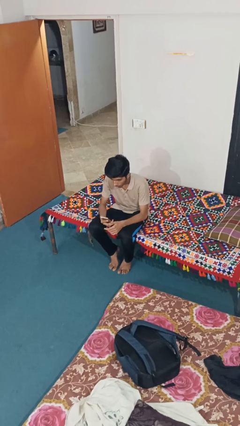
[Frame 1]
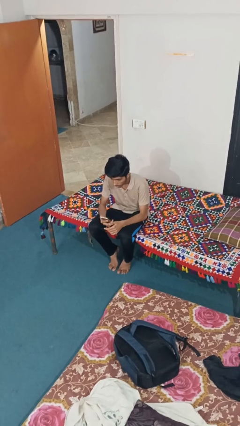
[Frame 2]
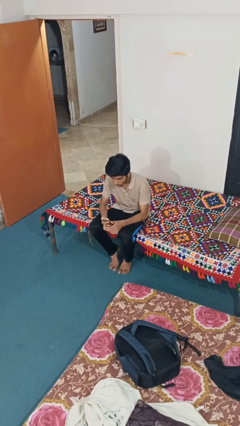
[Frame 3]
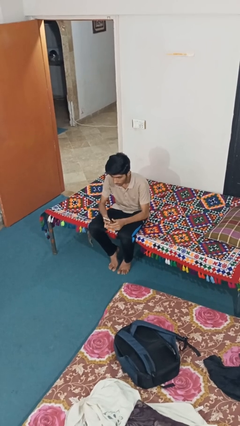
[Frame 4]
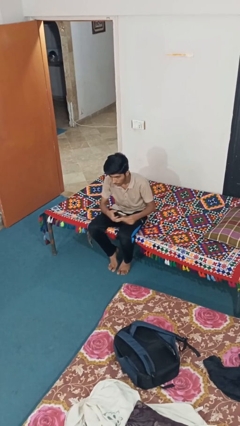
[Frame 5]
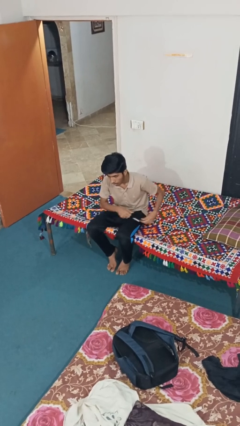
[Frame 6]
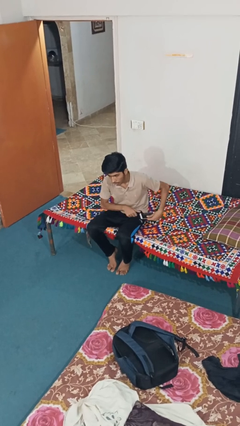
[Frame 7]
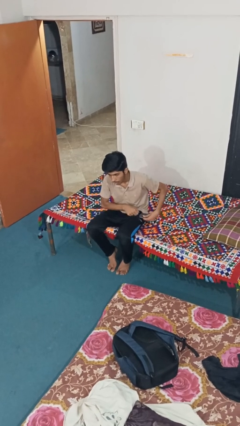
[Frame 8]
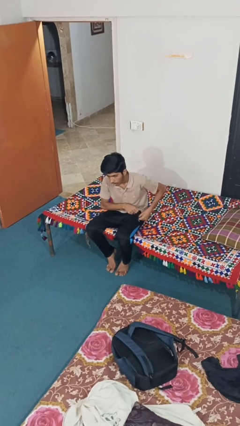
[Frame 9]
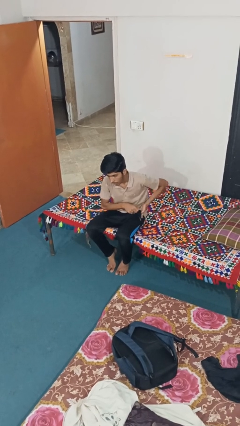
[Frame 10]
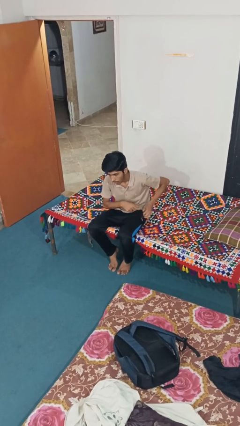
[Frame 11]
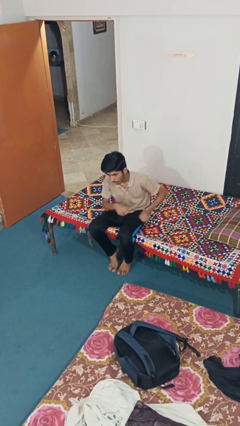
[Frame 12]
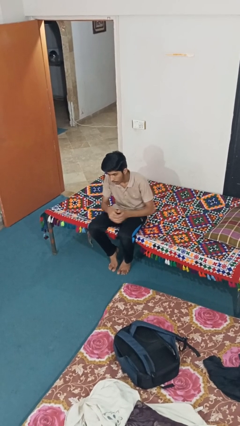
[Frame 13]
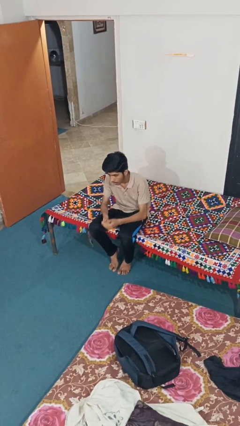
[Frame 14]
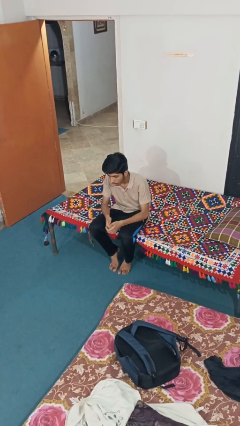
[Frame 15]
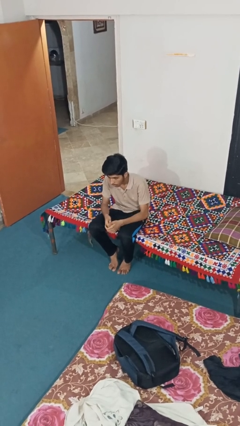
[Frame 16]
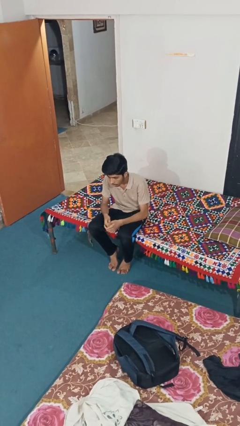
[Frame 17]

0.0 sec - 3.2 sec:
person puts phone into pocket

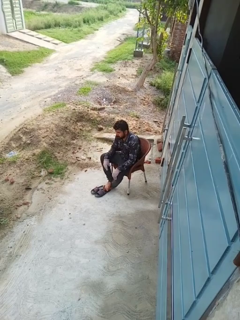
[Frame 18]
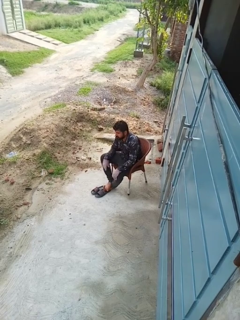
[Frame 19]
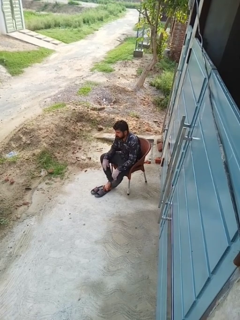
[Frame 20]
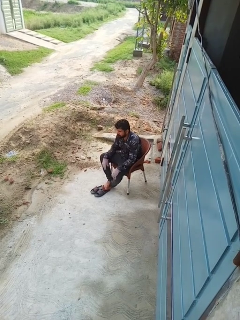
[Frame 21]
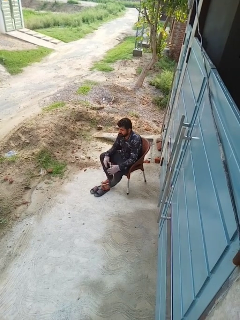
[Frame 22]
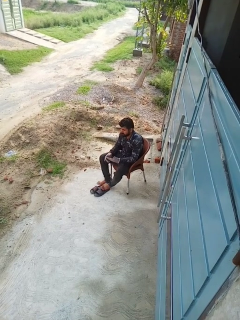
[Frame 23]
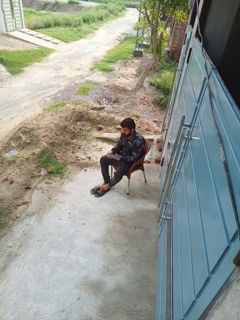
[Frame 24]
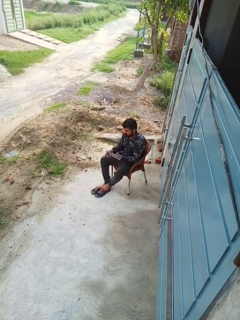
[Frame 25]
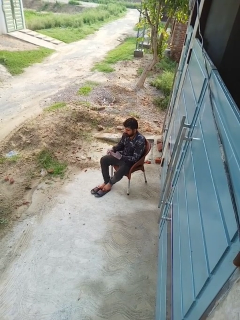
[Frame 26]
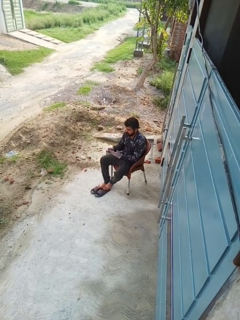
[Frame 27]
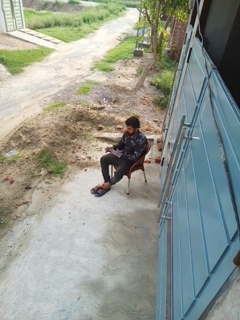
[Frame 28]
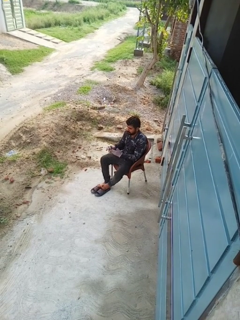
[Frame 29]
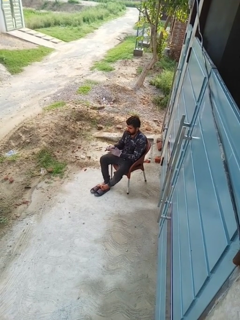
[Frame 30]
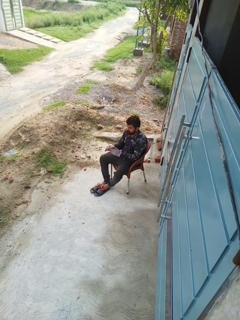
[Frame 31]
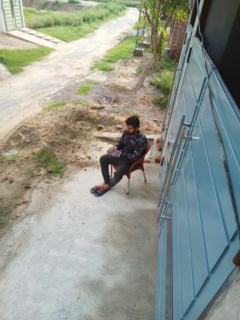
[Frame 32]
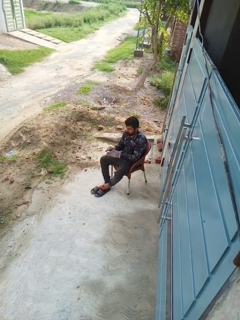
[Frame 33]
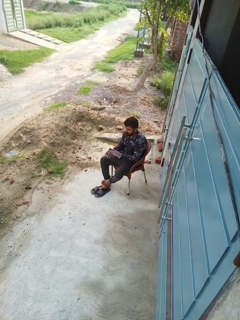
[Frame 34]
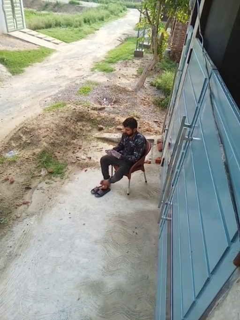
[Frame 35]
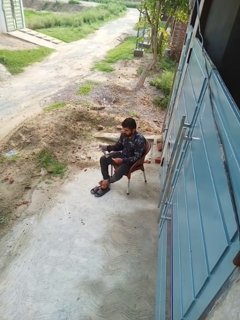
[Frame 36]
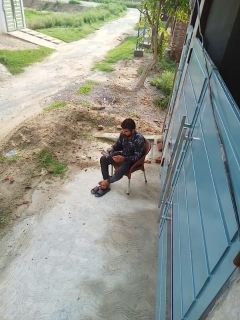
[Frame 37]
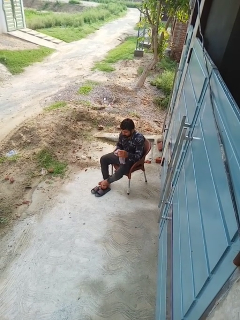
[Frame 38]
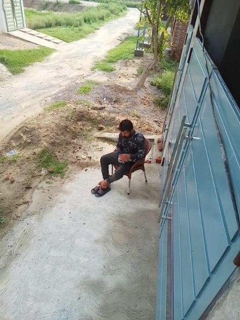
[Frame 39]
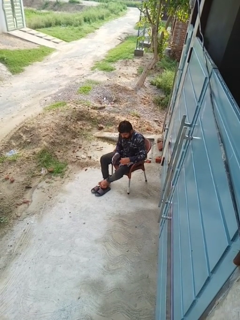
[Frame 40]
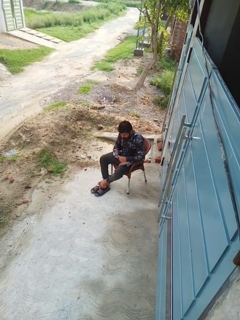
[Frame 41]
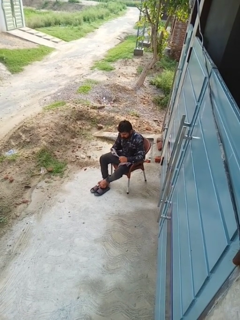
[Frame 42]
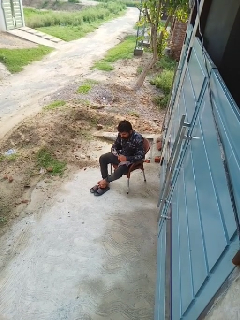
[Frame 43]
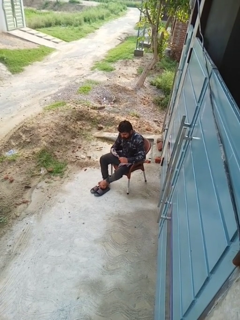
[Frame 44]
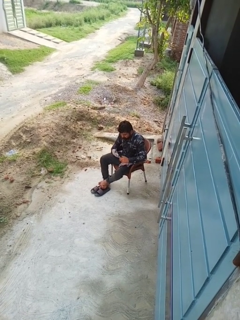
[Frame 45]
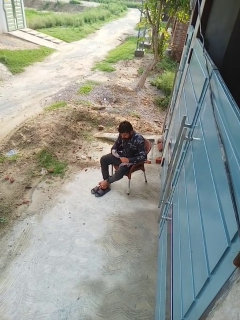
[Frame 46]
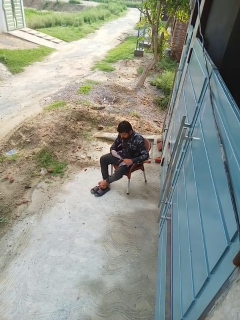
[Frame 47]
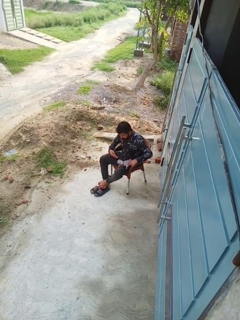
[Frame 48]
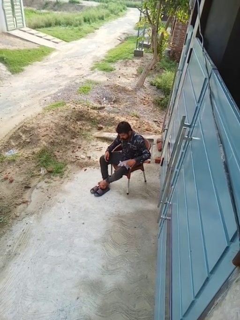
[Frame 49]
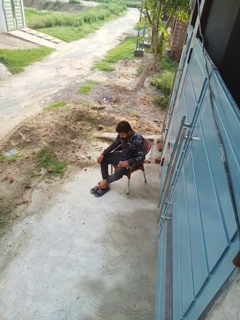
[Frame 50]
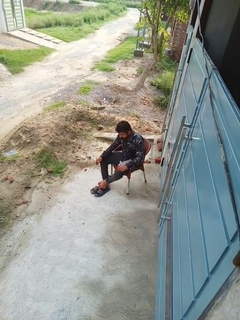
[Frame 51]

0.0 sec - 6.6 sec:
person takes off gloves

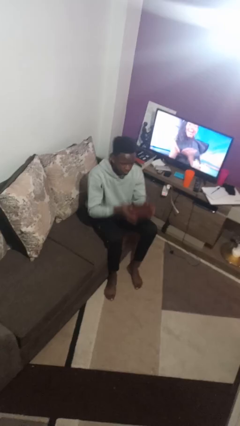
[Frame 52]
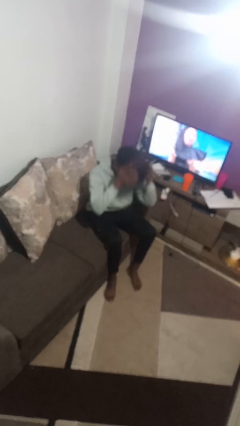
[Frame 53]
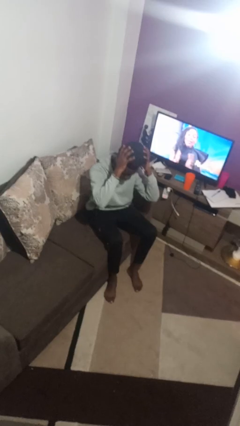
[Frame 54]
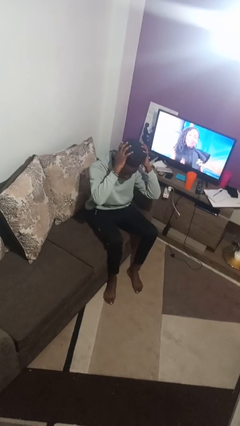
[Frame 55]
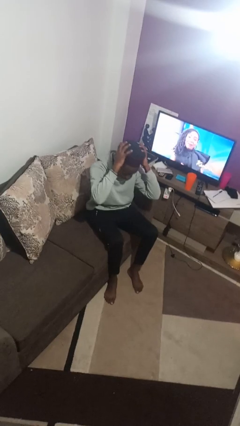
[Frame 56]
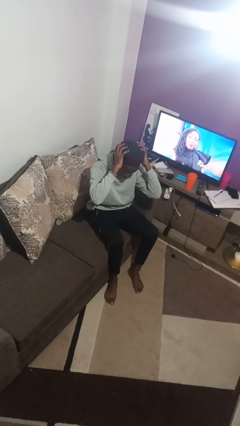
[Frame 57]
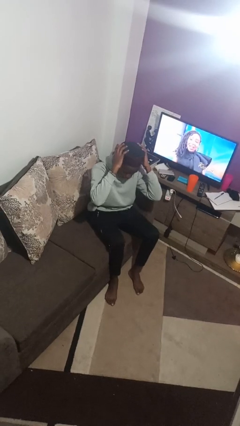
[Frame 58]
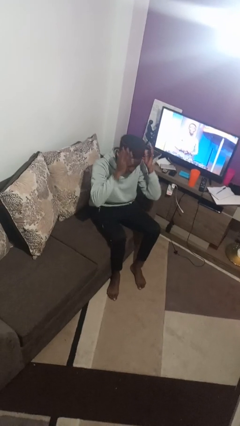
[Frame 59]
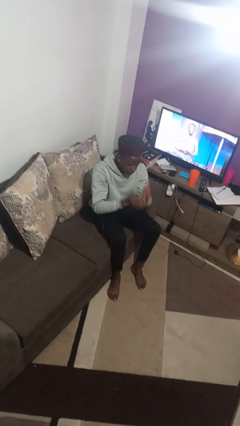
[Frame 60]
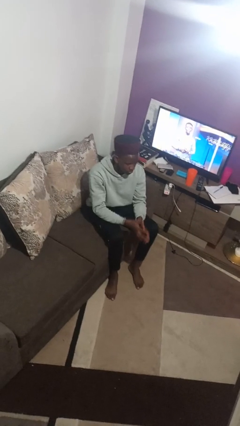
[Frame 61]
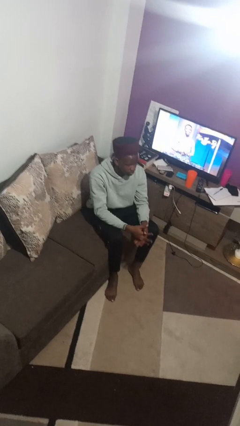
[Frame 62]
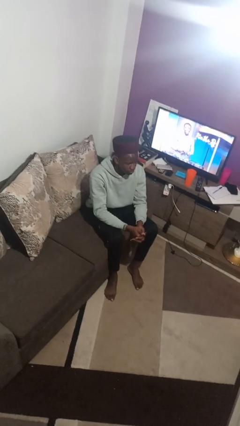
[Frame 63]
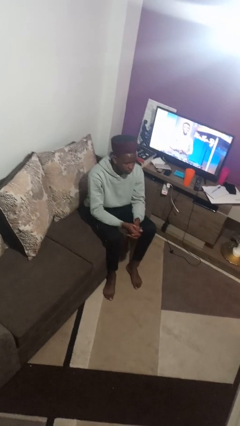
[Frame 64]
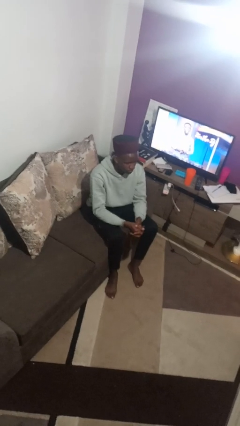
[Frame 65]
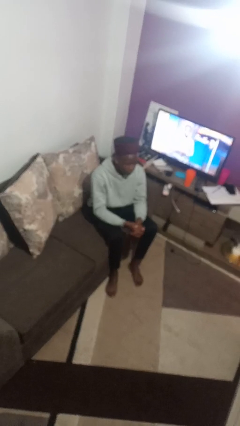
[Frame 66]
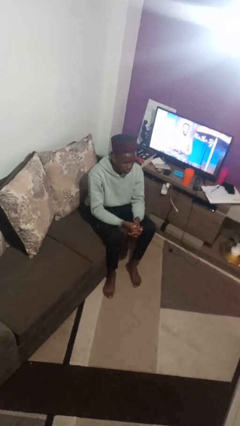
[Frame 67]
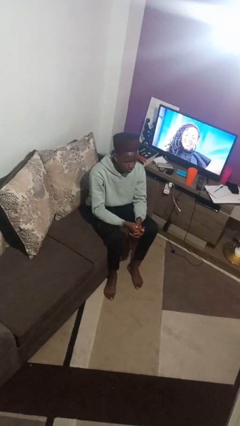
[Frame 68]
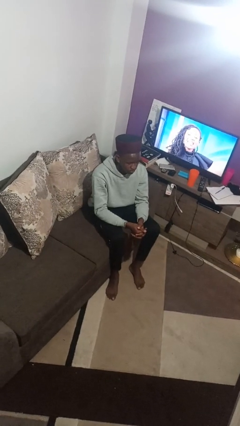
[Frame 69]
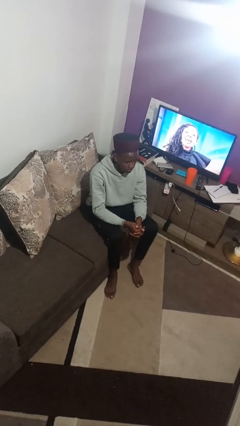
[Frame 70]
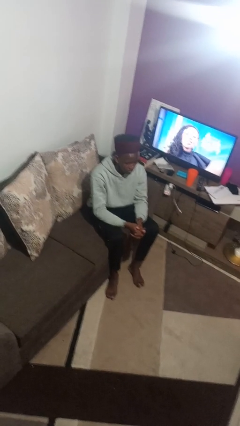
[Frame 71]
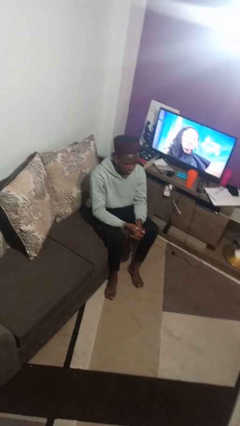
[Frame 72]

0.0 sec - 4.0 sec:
person puts on hat

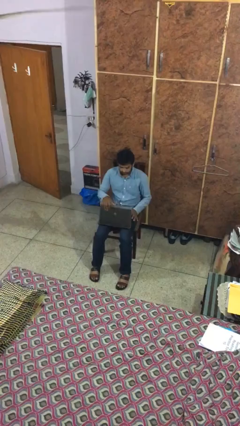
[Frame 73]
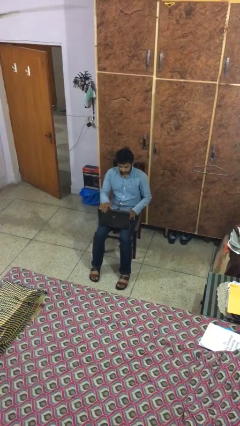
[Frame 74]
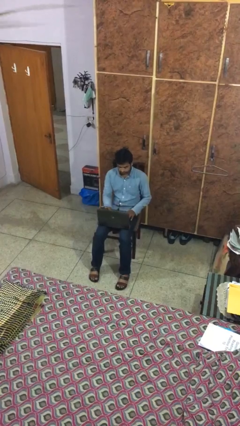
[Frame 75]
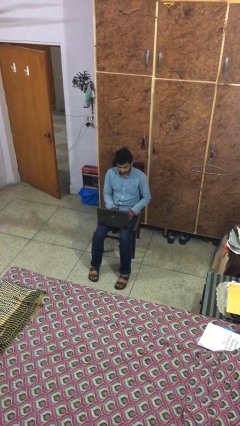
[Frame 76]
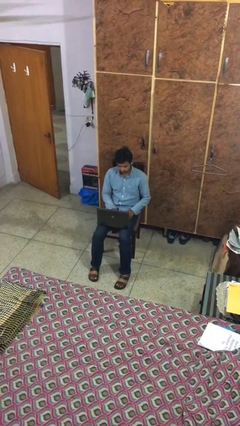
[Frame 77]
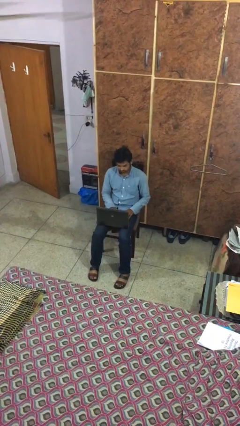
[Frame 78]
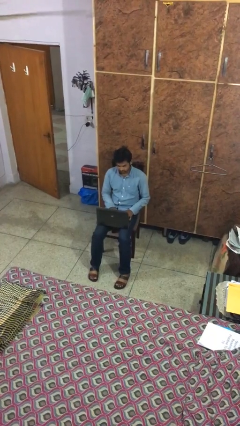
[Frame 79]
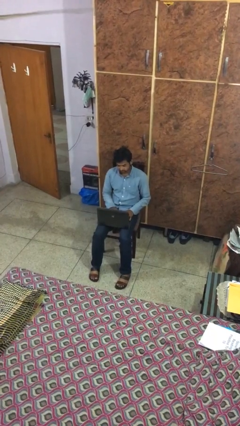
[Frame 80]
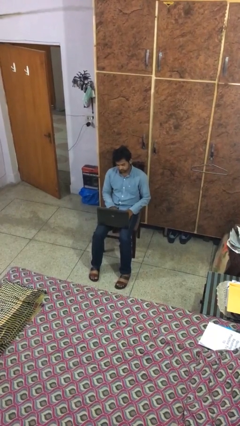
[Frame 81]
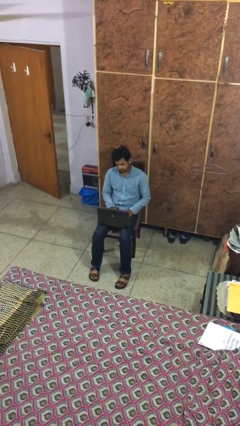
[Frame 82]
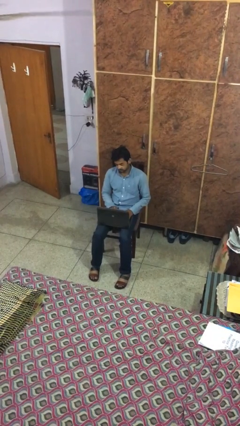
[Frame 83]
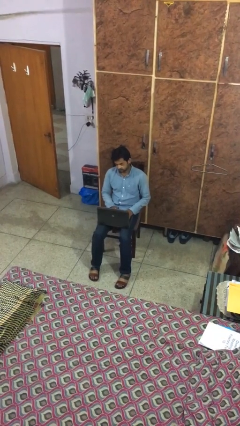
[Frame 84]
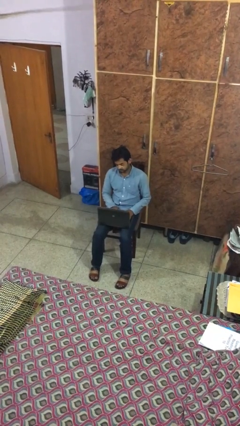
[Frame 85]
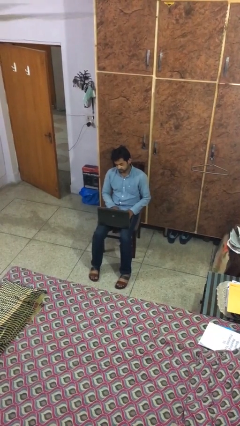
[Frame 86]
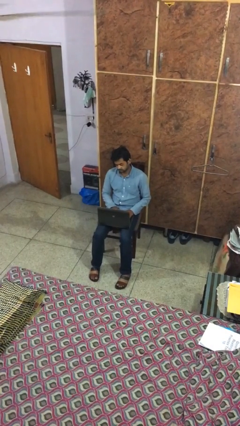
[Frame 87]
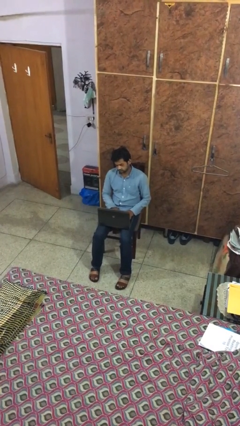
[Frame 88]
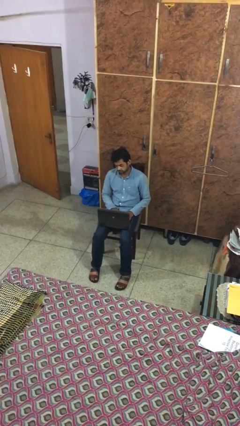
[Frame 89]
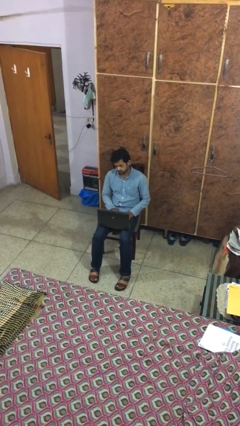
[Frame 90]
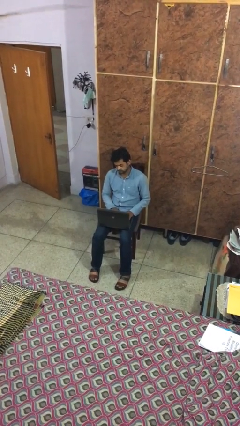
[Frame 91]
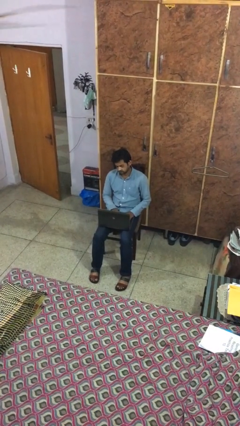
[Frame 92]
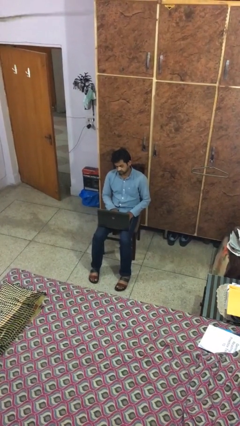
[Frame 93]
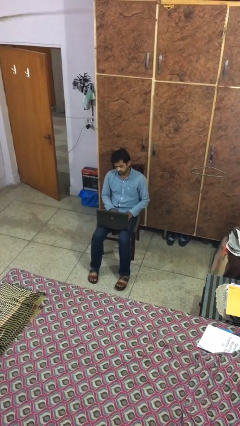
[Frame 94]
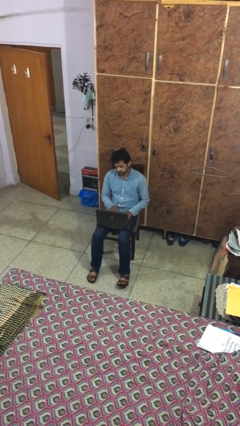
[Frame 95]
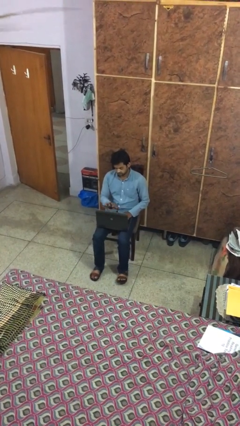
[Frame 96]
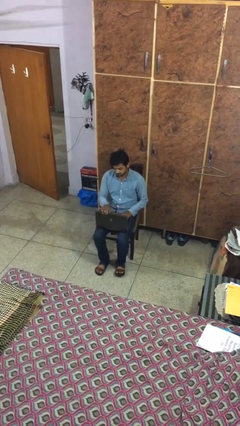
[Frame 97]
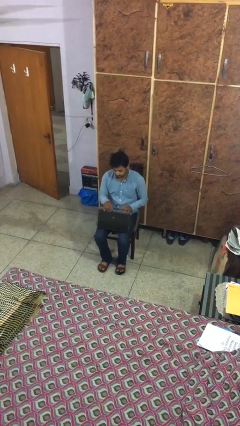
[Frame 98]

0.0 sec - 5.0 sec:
person interacts with laptop

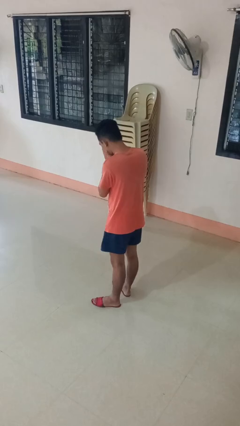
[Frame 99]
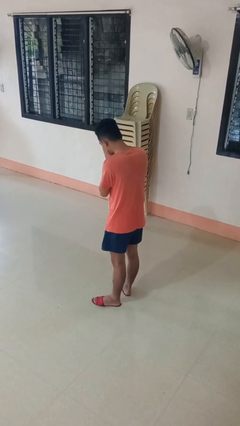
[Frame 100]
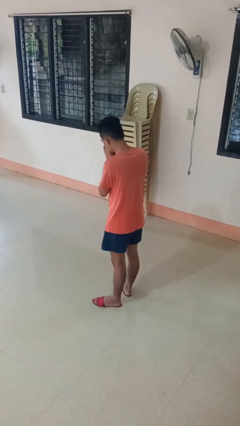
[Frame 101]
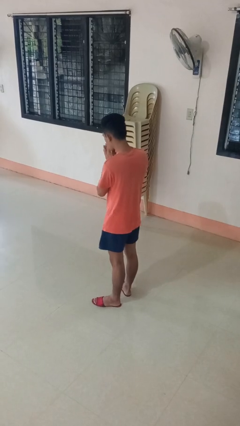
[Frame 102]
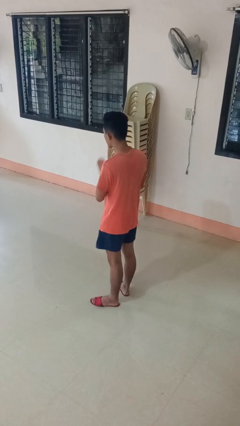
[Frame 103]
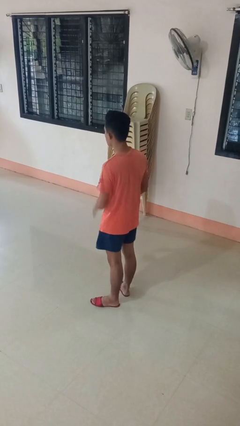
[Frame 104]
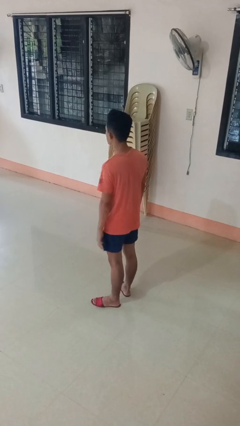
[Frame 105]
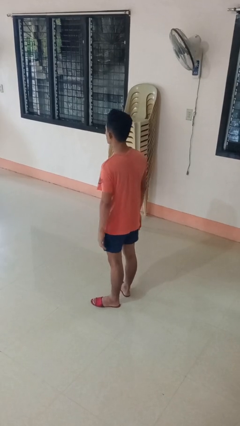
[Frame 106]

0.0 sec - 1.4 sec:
person shrugs
